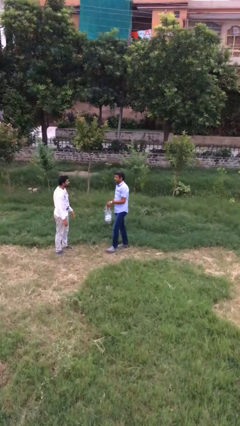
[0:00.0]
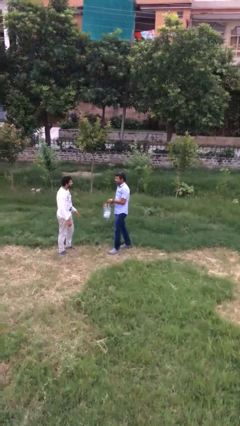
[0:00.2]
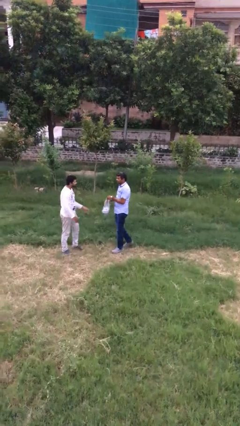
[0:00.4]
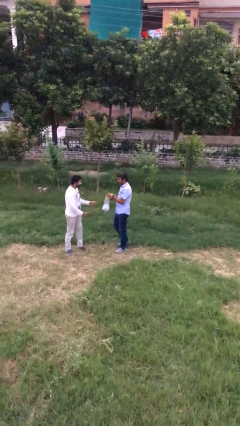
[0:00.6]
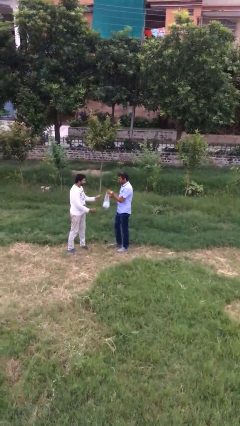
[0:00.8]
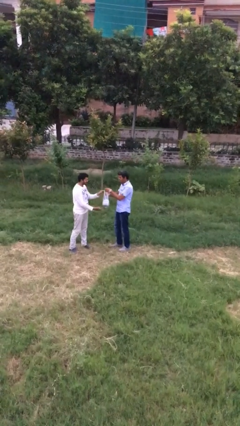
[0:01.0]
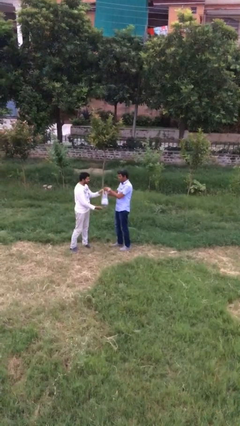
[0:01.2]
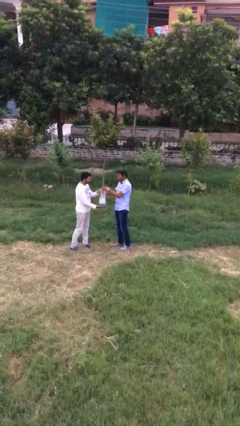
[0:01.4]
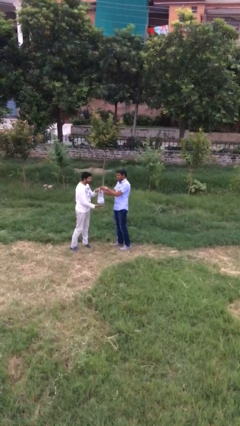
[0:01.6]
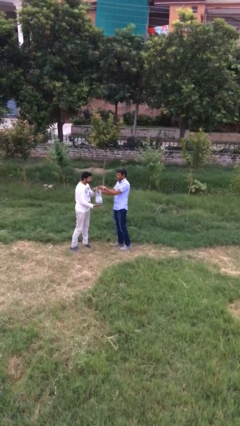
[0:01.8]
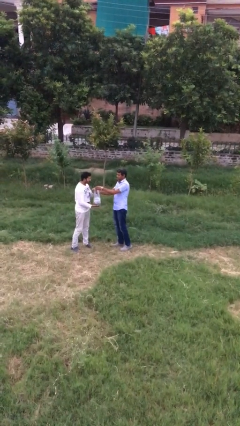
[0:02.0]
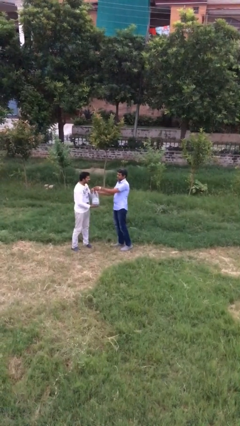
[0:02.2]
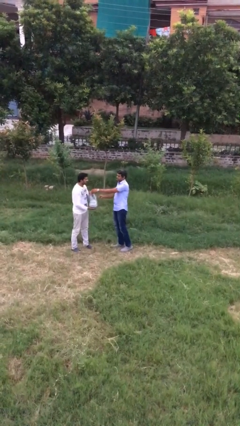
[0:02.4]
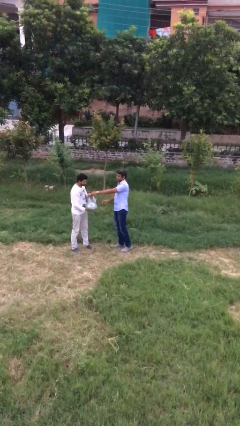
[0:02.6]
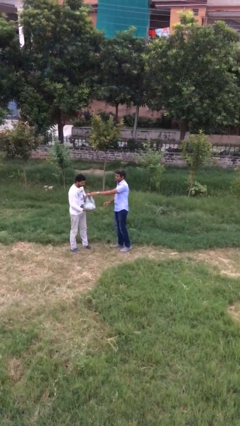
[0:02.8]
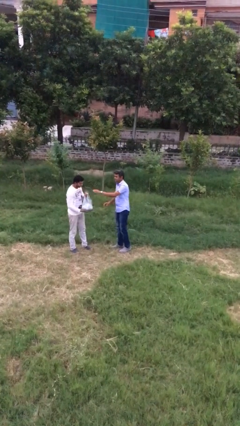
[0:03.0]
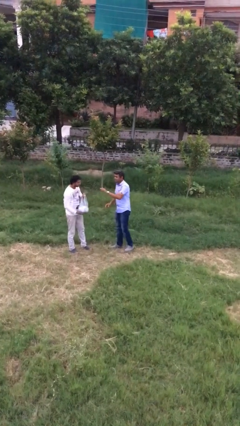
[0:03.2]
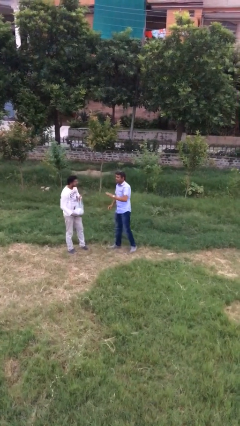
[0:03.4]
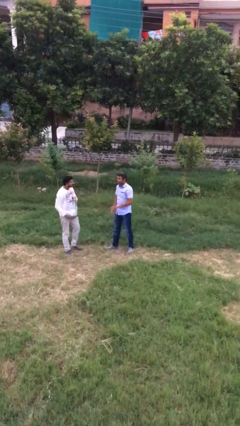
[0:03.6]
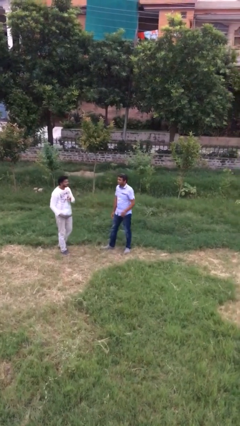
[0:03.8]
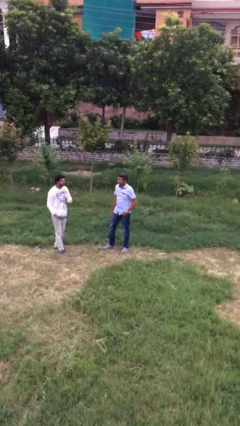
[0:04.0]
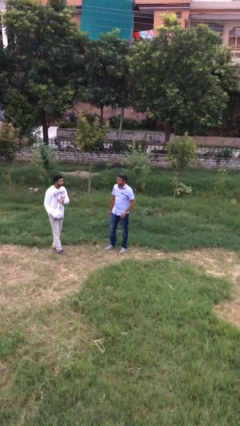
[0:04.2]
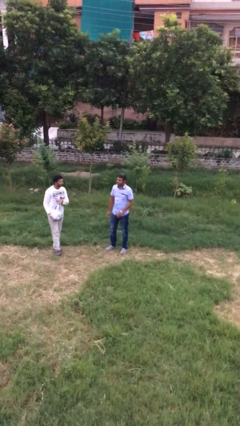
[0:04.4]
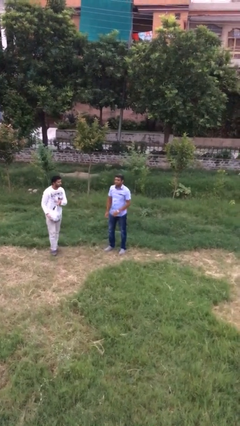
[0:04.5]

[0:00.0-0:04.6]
person transfers object to person

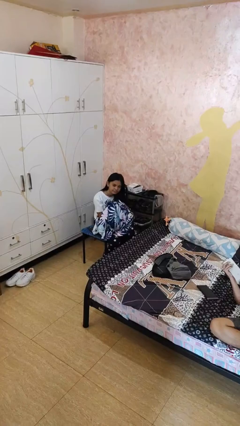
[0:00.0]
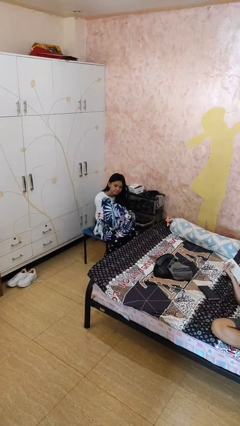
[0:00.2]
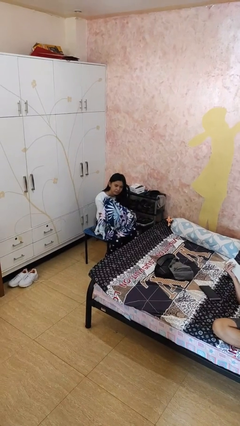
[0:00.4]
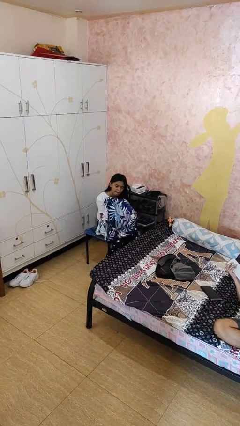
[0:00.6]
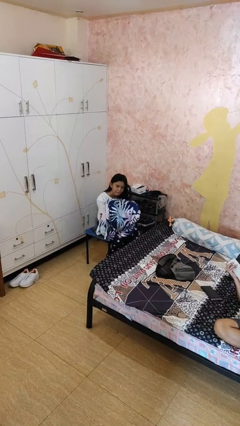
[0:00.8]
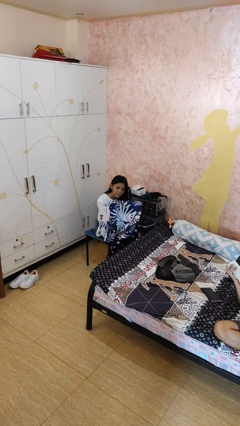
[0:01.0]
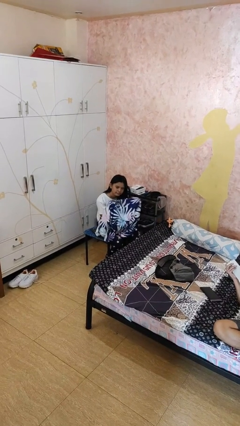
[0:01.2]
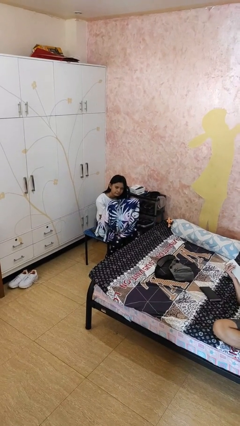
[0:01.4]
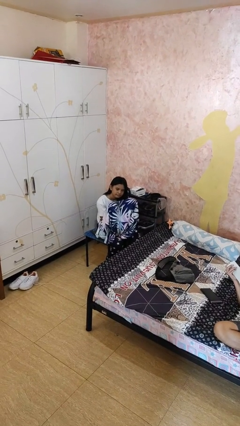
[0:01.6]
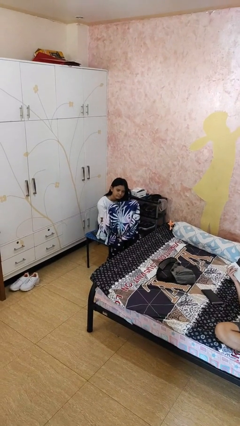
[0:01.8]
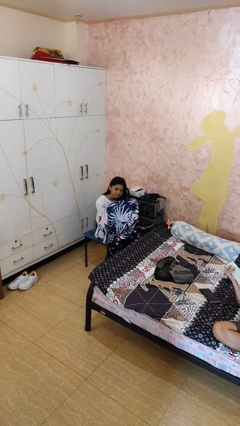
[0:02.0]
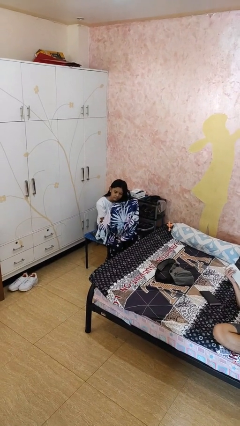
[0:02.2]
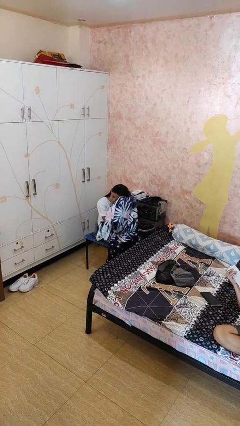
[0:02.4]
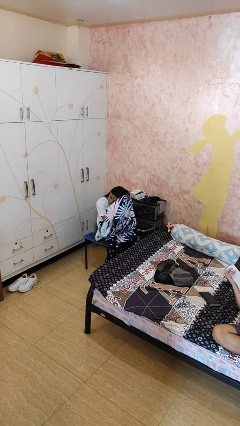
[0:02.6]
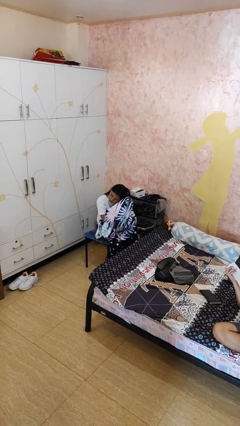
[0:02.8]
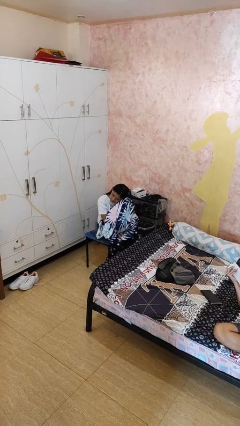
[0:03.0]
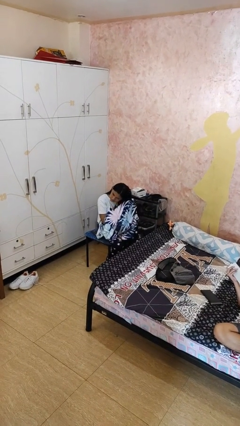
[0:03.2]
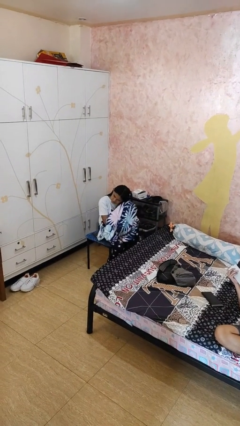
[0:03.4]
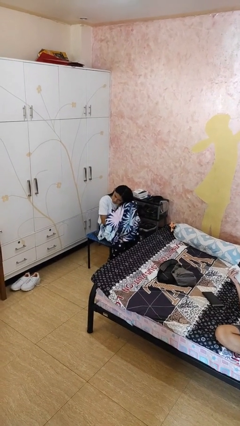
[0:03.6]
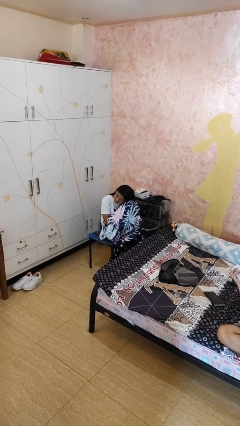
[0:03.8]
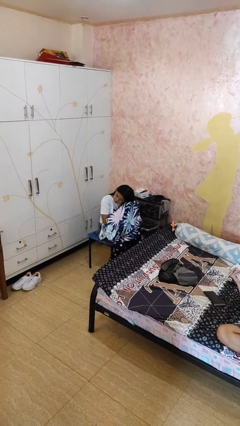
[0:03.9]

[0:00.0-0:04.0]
person dries hair with towel

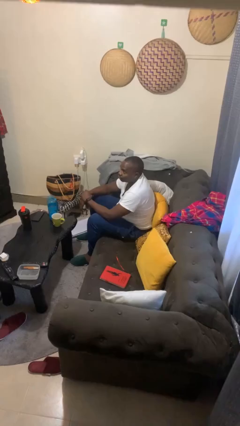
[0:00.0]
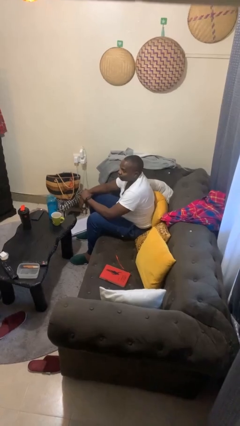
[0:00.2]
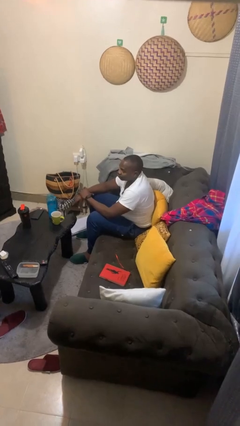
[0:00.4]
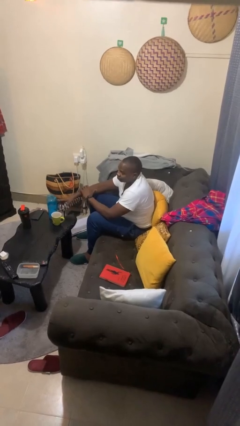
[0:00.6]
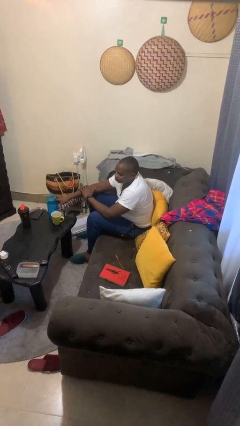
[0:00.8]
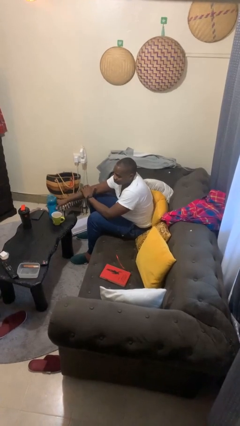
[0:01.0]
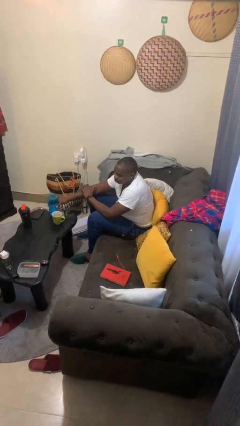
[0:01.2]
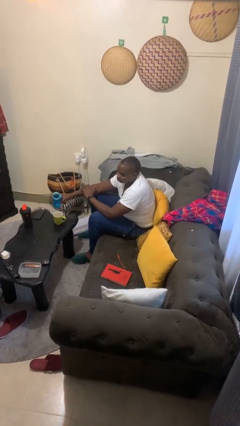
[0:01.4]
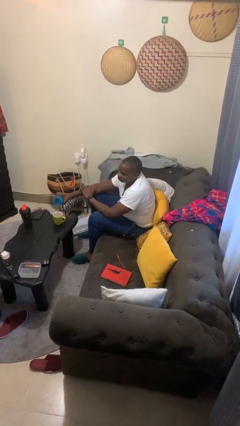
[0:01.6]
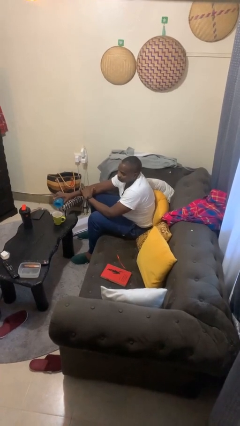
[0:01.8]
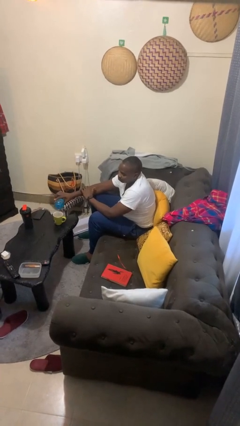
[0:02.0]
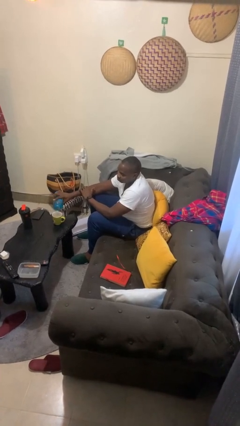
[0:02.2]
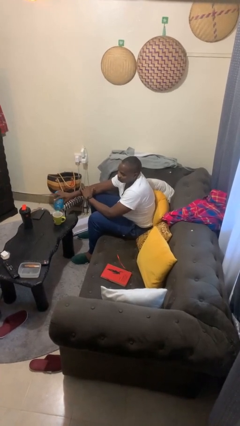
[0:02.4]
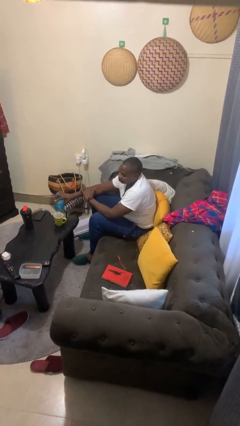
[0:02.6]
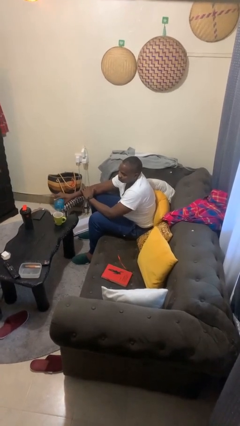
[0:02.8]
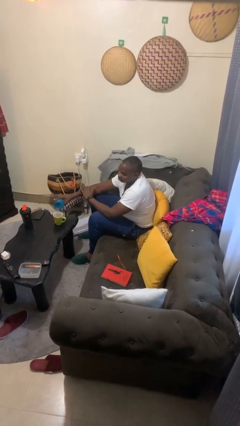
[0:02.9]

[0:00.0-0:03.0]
person pours liquid into cup

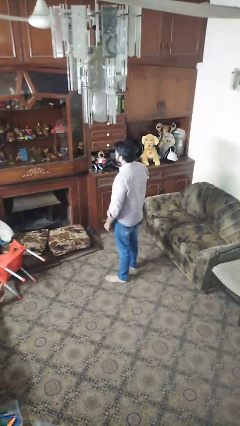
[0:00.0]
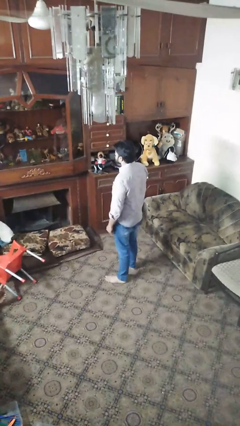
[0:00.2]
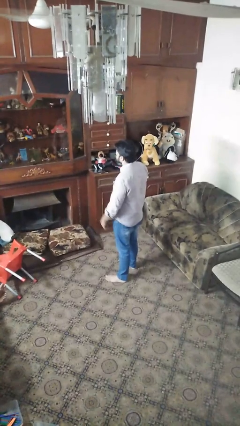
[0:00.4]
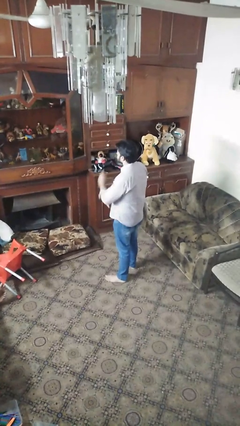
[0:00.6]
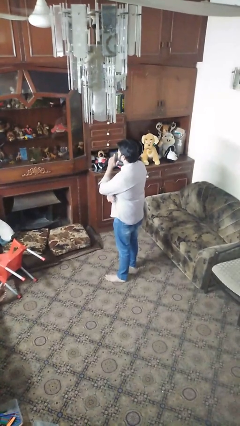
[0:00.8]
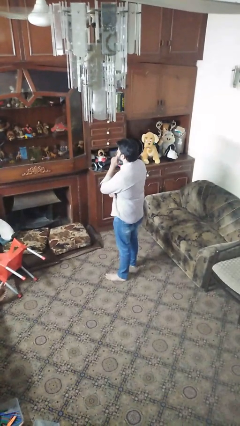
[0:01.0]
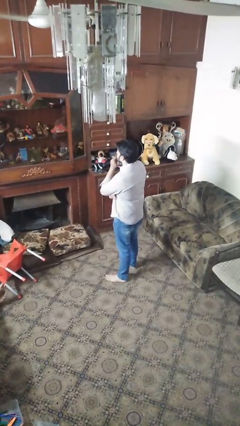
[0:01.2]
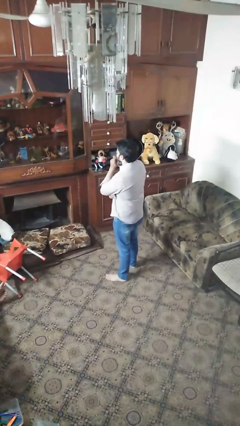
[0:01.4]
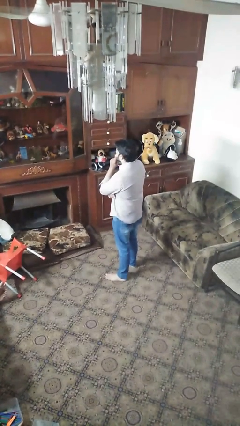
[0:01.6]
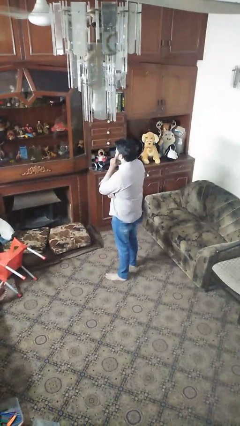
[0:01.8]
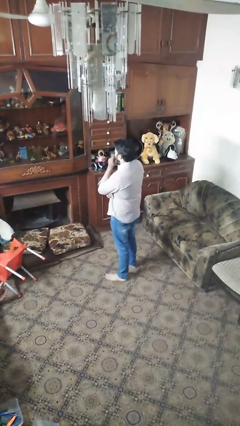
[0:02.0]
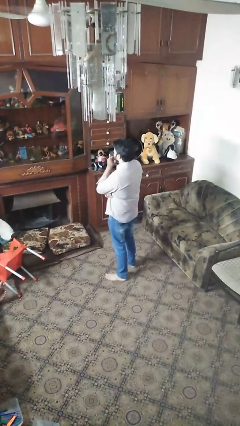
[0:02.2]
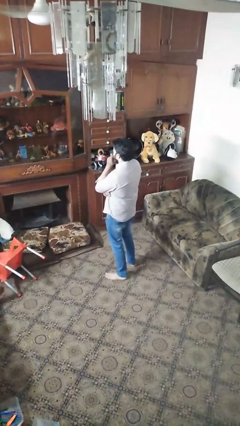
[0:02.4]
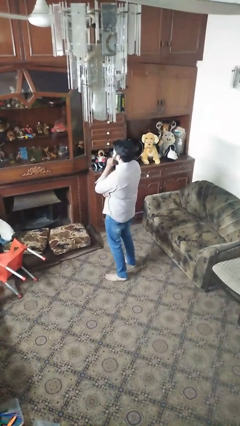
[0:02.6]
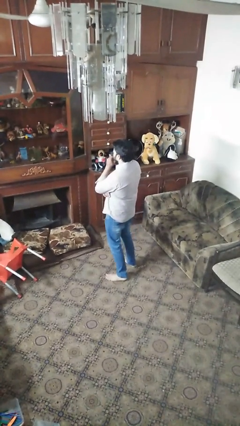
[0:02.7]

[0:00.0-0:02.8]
person strokes chin

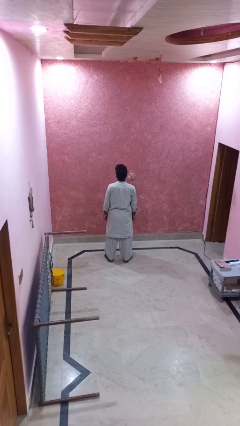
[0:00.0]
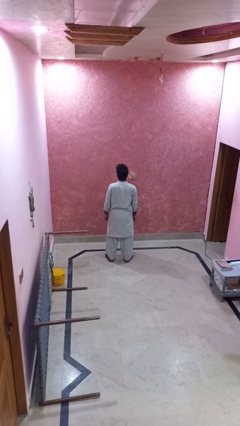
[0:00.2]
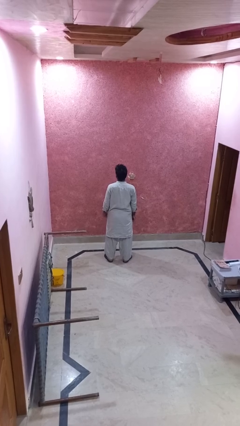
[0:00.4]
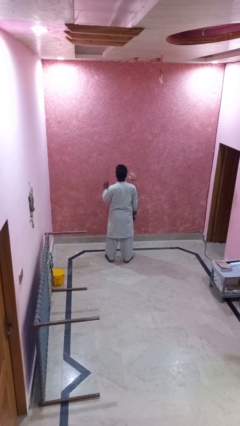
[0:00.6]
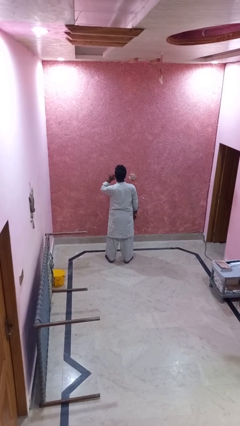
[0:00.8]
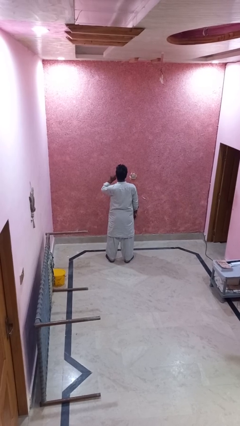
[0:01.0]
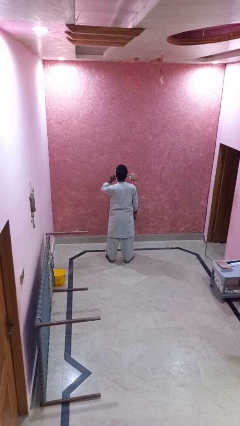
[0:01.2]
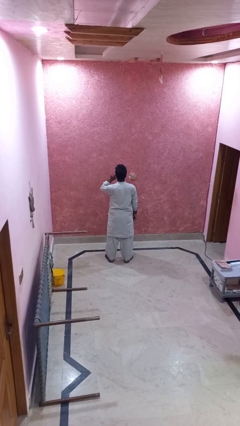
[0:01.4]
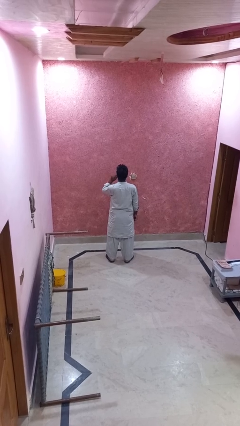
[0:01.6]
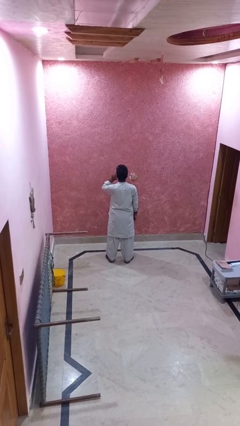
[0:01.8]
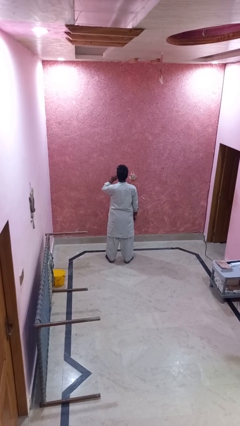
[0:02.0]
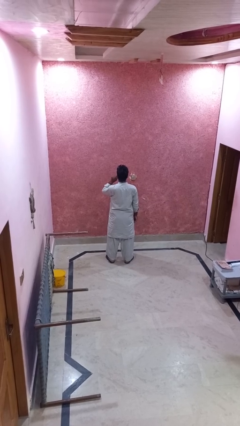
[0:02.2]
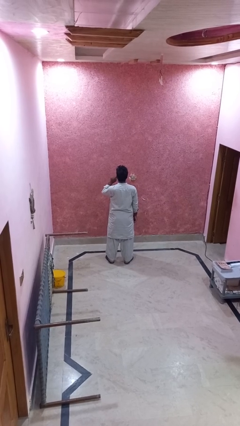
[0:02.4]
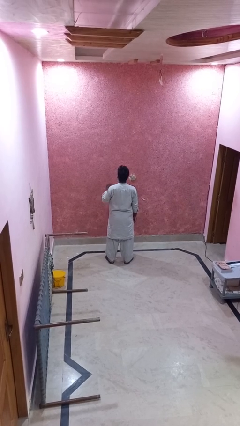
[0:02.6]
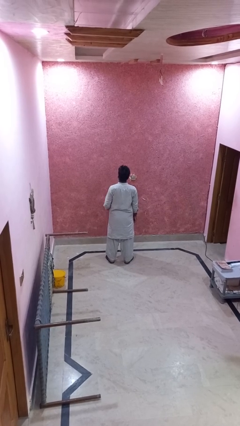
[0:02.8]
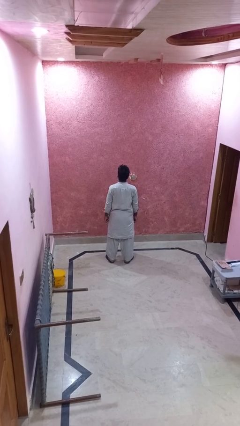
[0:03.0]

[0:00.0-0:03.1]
person touches earlobe
